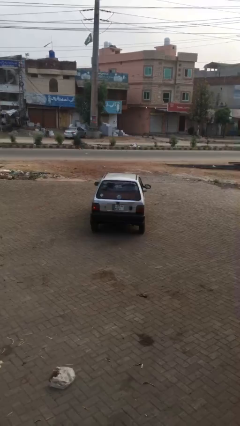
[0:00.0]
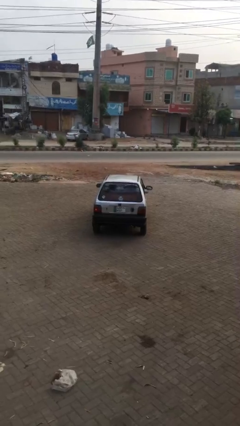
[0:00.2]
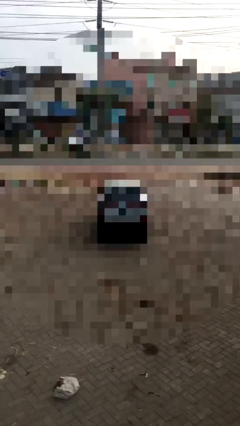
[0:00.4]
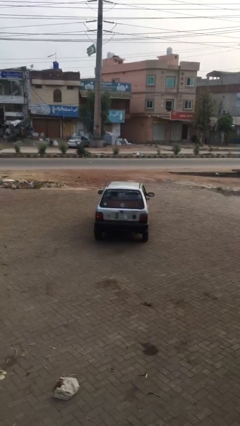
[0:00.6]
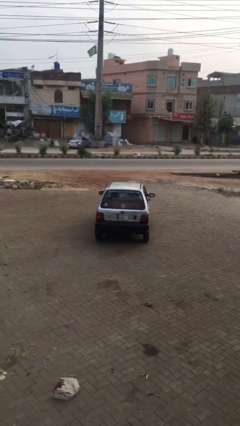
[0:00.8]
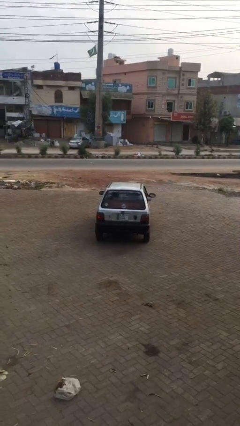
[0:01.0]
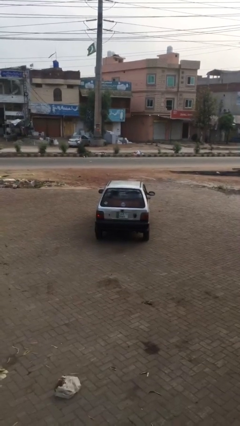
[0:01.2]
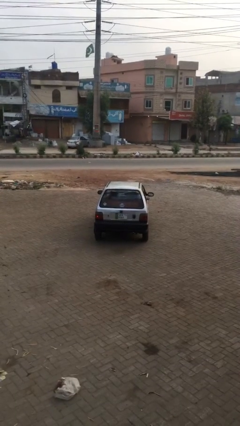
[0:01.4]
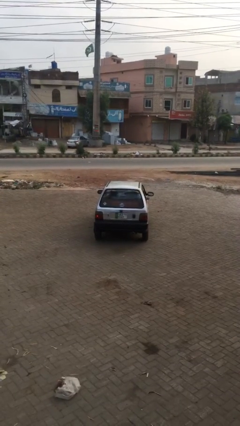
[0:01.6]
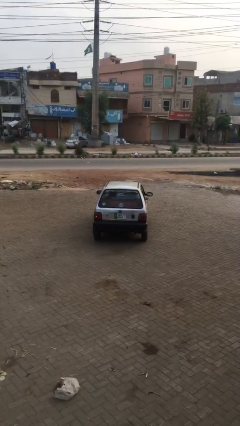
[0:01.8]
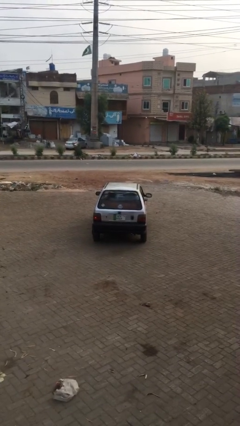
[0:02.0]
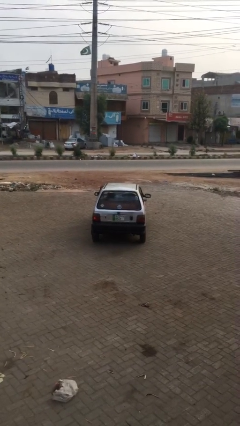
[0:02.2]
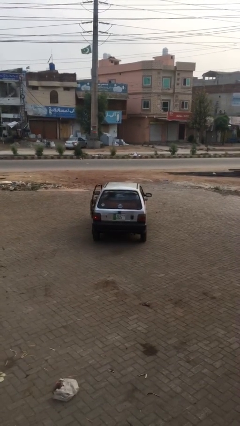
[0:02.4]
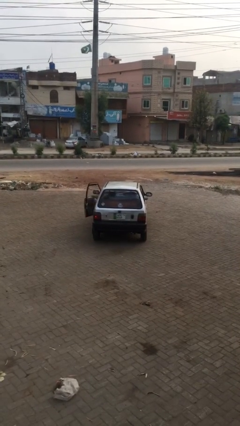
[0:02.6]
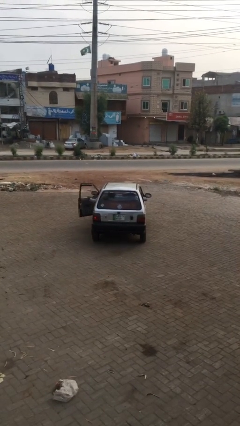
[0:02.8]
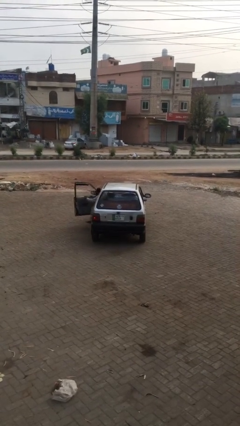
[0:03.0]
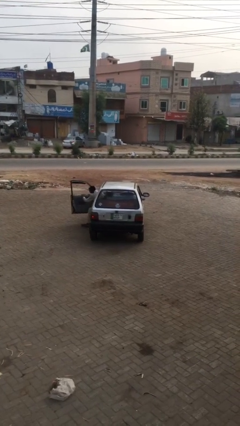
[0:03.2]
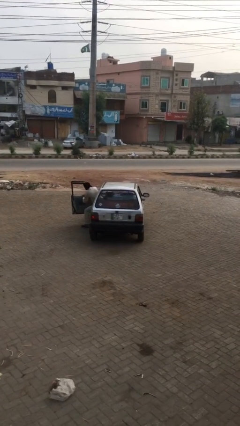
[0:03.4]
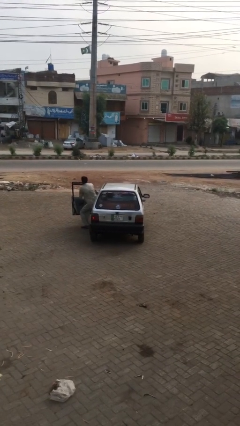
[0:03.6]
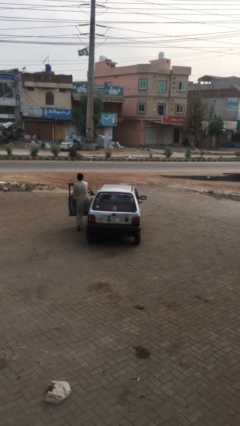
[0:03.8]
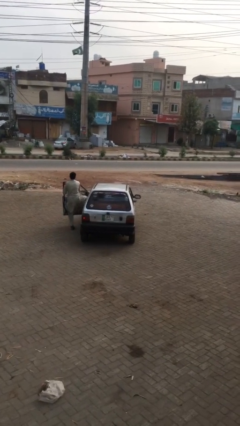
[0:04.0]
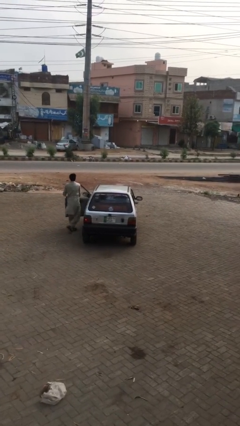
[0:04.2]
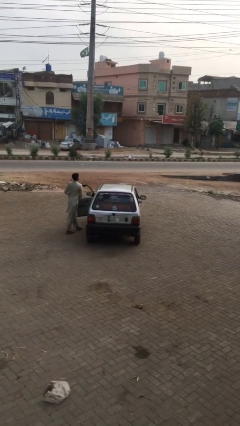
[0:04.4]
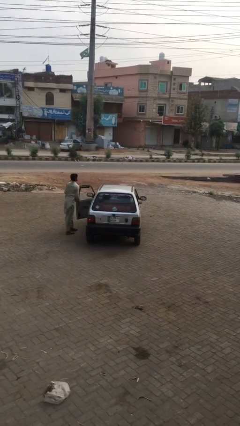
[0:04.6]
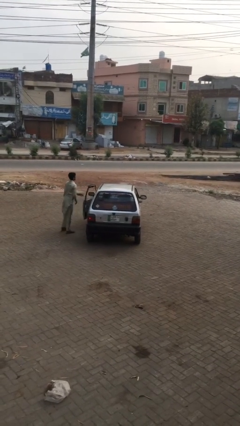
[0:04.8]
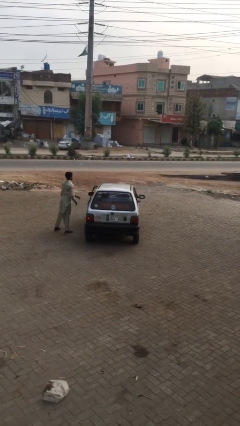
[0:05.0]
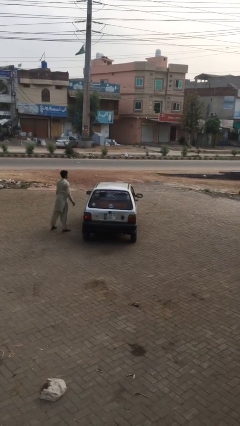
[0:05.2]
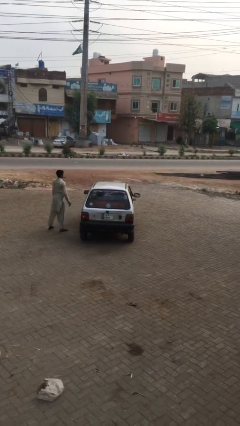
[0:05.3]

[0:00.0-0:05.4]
car drops off person

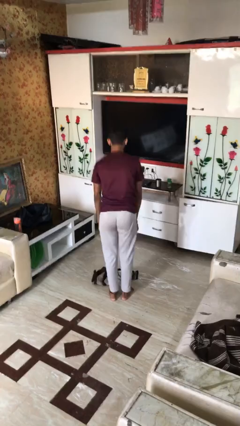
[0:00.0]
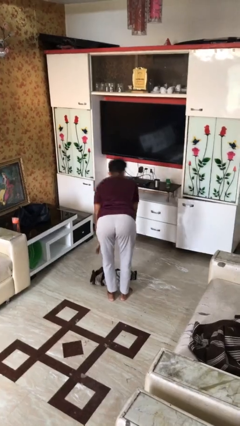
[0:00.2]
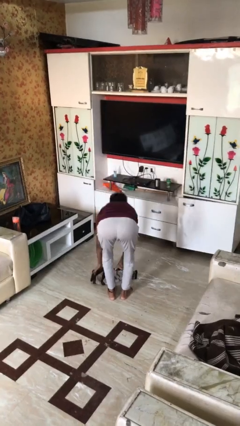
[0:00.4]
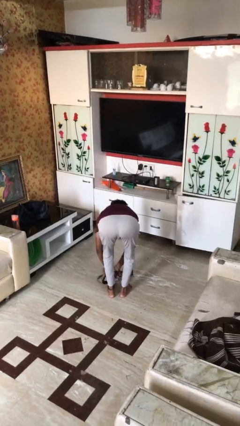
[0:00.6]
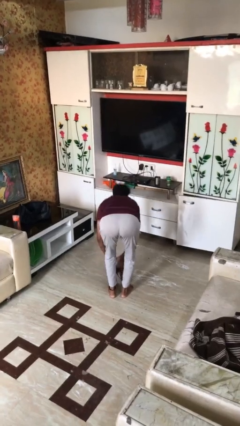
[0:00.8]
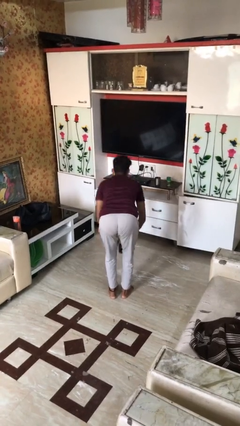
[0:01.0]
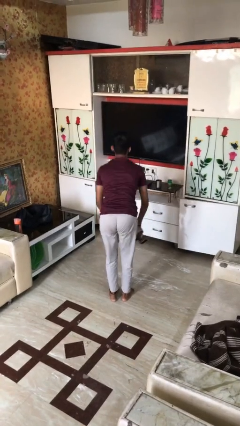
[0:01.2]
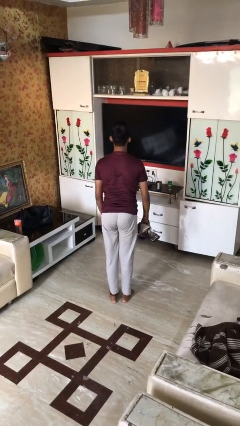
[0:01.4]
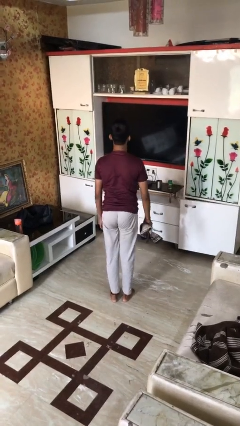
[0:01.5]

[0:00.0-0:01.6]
person picks up object from floor

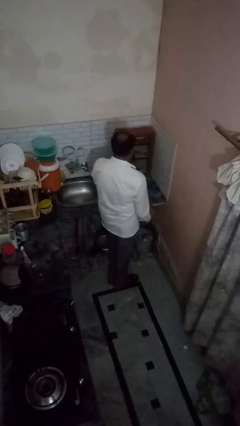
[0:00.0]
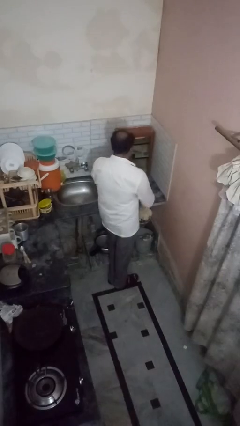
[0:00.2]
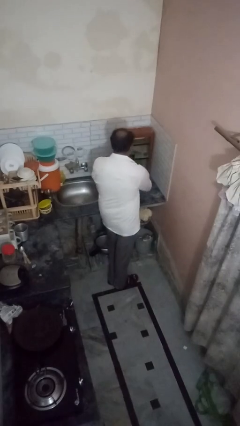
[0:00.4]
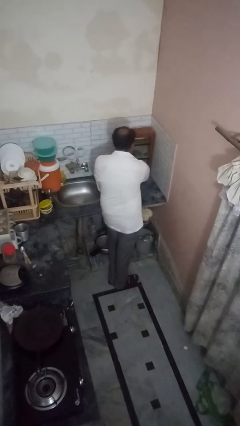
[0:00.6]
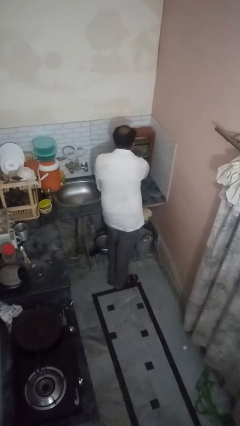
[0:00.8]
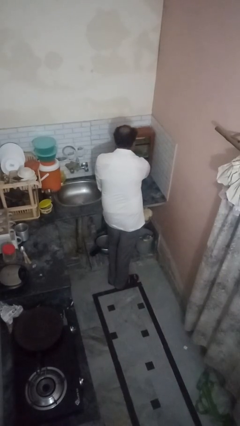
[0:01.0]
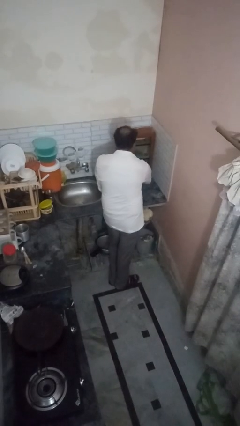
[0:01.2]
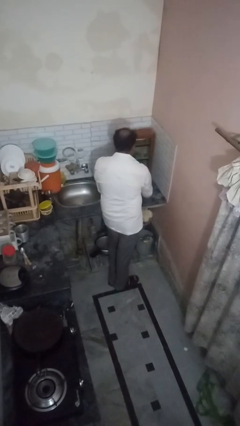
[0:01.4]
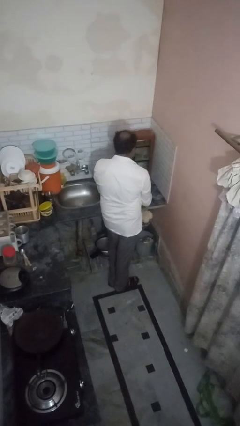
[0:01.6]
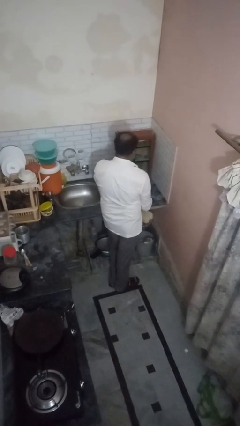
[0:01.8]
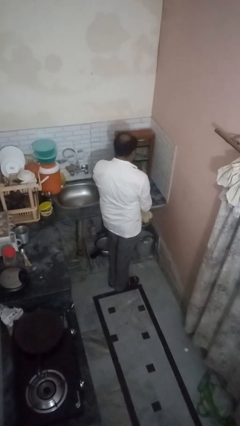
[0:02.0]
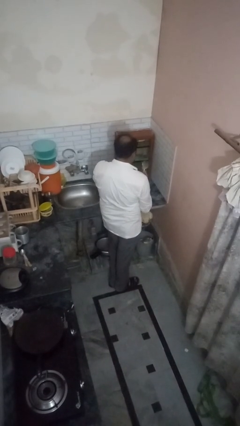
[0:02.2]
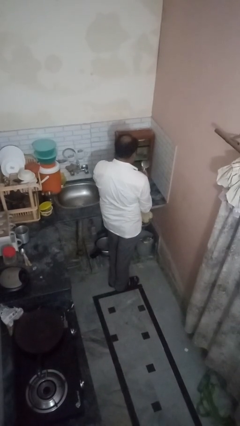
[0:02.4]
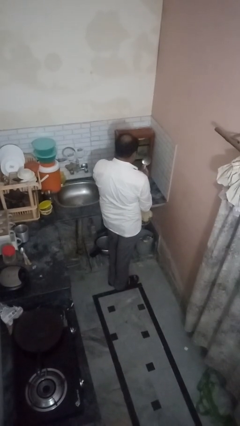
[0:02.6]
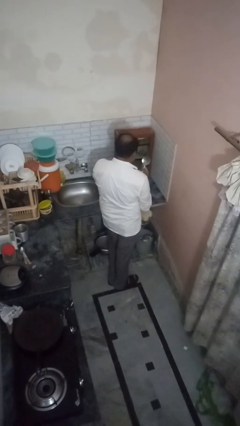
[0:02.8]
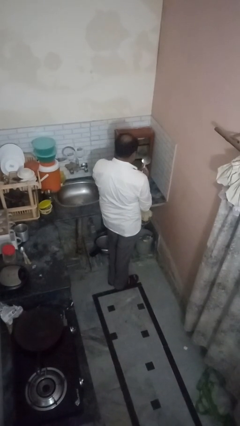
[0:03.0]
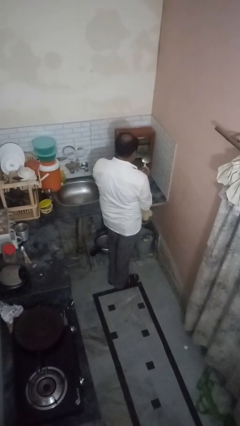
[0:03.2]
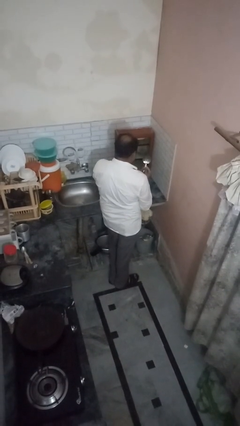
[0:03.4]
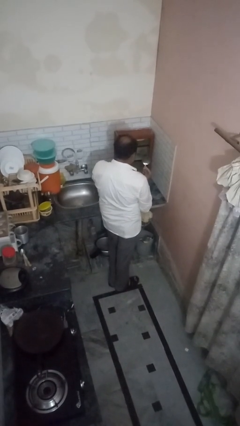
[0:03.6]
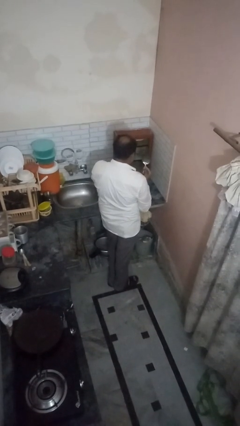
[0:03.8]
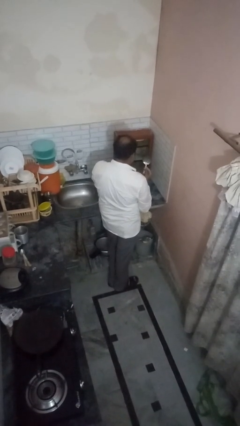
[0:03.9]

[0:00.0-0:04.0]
person takes object from kitchen drawer

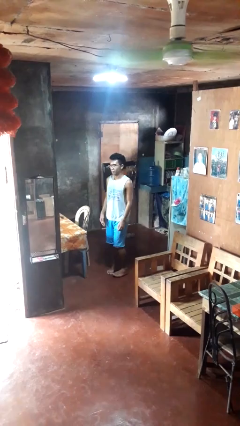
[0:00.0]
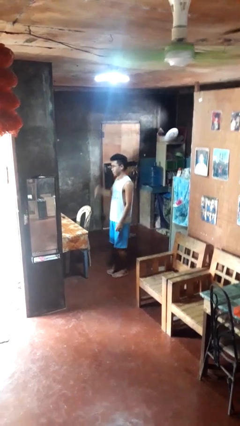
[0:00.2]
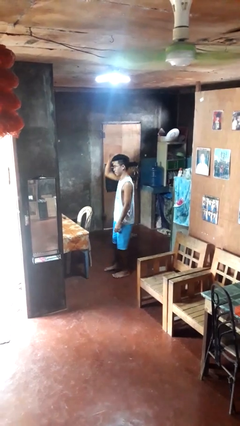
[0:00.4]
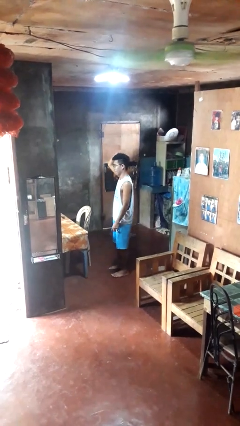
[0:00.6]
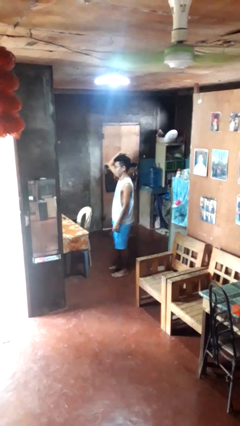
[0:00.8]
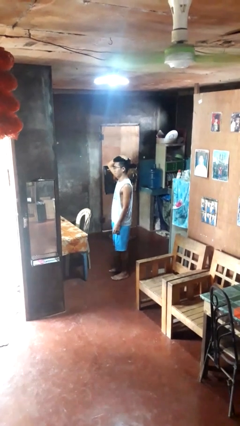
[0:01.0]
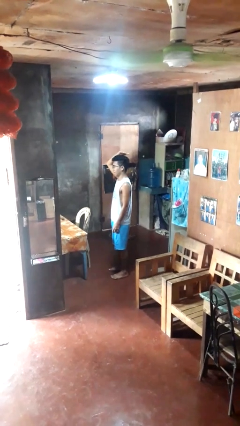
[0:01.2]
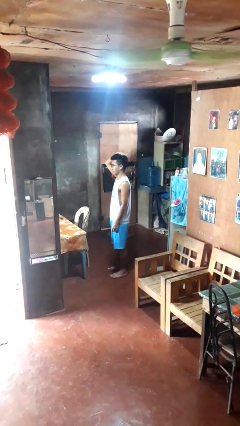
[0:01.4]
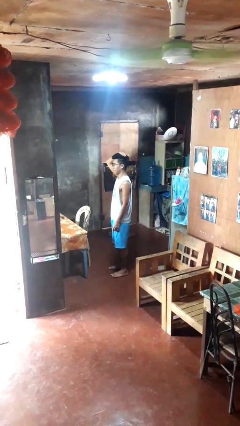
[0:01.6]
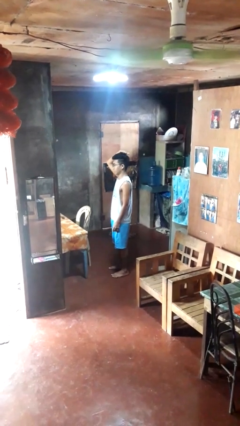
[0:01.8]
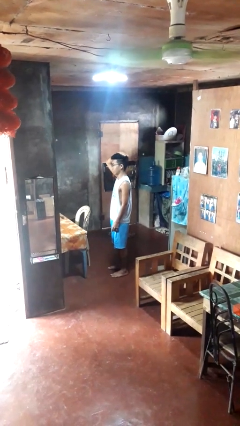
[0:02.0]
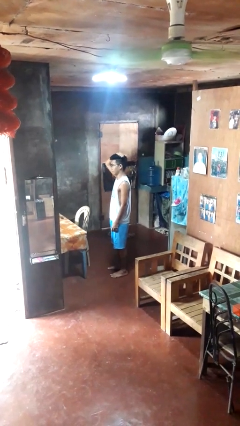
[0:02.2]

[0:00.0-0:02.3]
person pats head

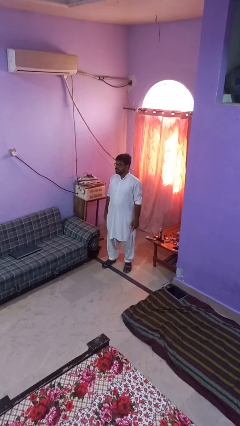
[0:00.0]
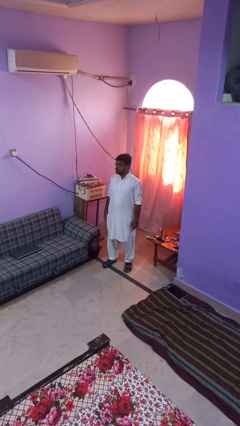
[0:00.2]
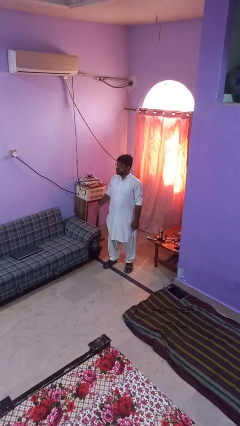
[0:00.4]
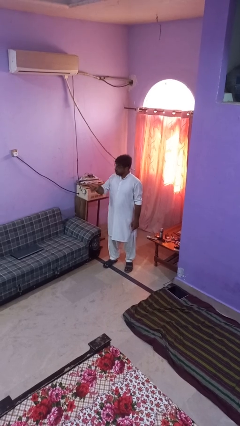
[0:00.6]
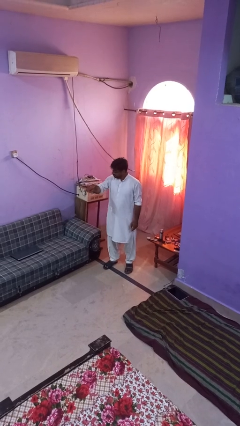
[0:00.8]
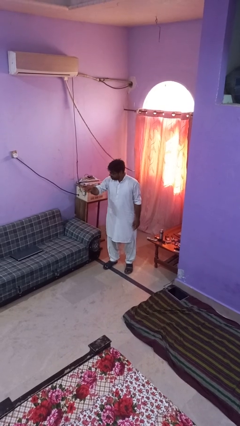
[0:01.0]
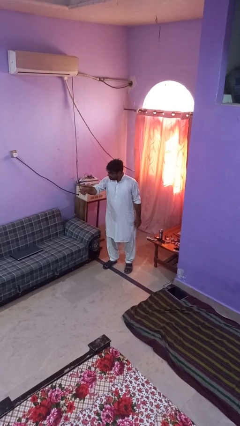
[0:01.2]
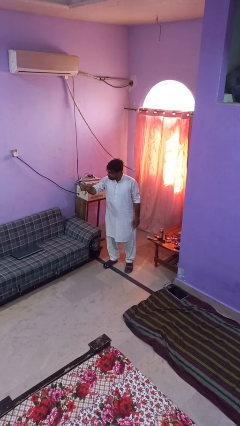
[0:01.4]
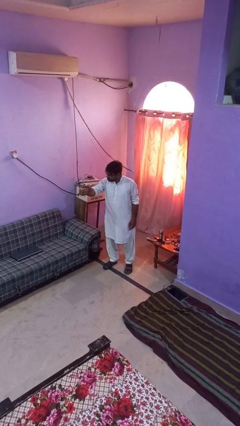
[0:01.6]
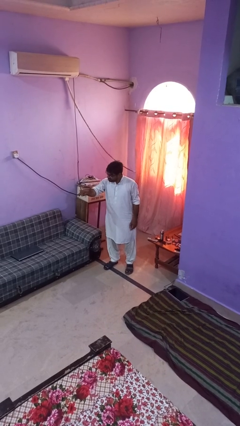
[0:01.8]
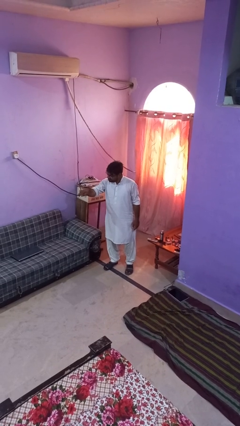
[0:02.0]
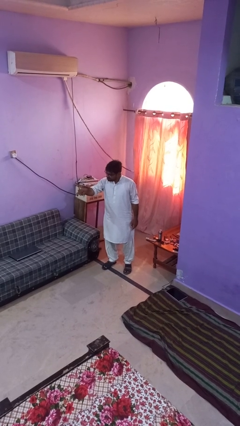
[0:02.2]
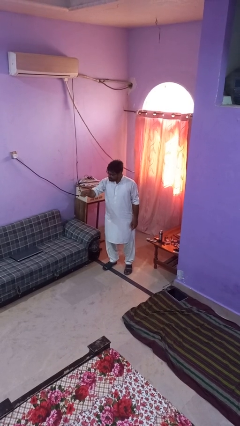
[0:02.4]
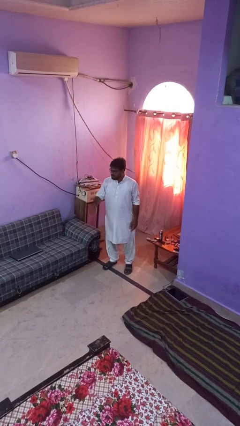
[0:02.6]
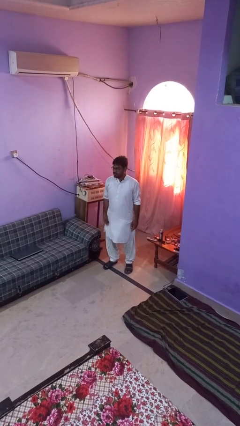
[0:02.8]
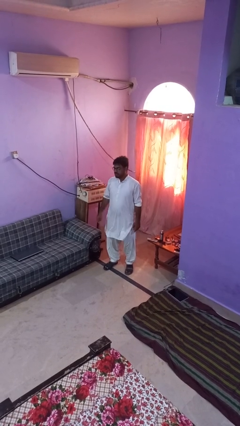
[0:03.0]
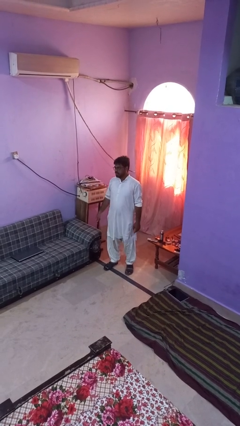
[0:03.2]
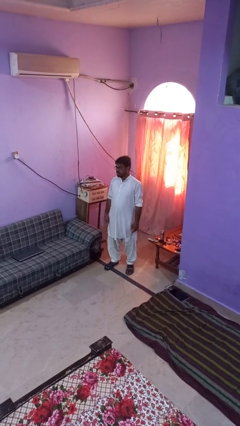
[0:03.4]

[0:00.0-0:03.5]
person points at person

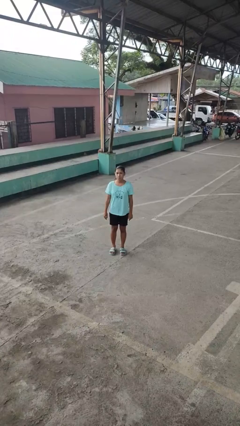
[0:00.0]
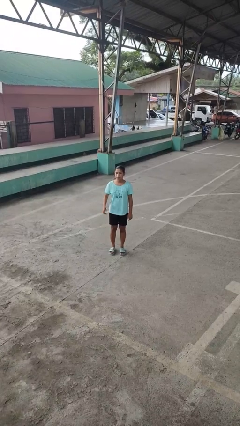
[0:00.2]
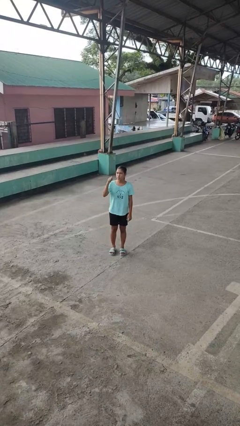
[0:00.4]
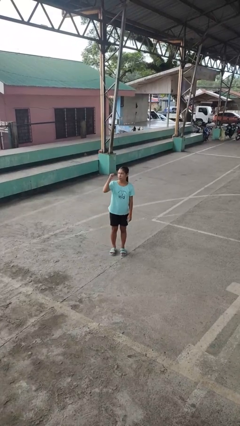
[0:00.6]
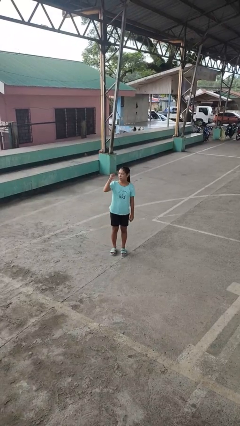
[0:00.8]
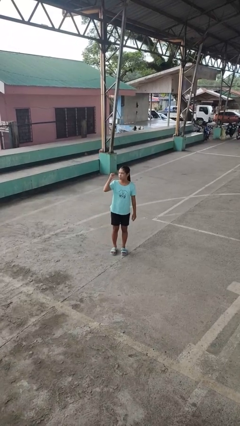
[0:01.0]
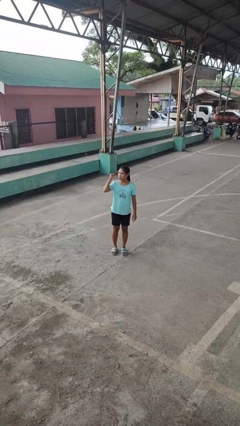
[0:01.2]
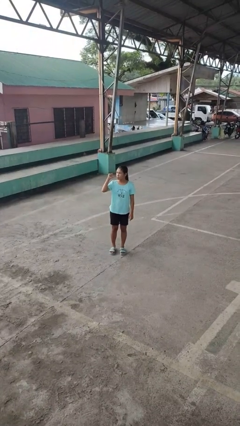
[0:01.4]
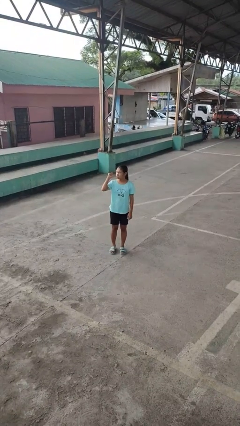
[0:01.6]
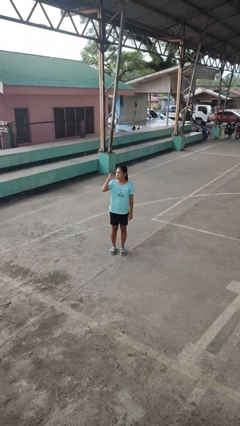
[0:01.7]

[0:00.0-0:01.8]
person gestures behind me
